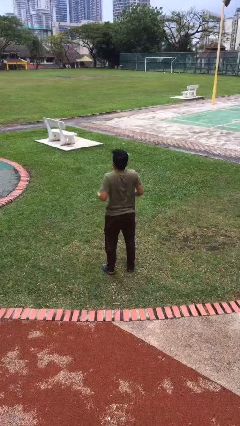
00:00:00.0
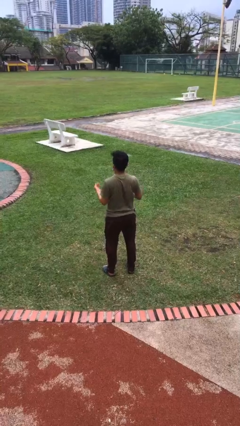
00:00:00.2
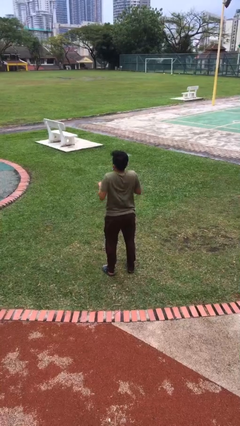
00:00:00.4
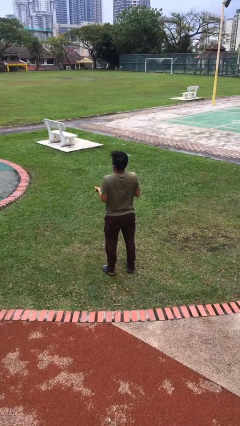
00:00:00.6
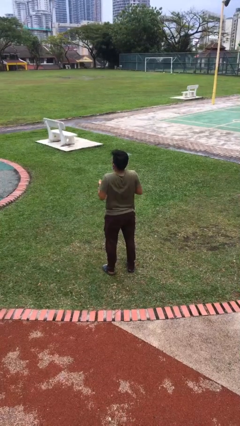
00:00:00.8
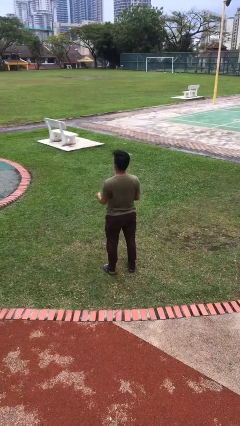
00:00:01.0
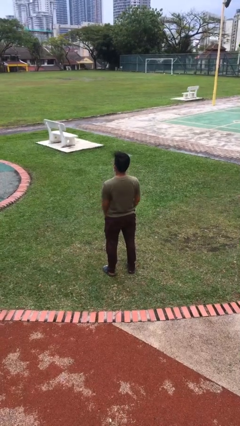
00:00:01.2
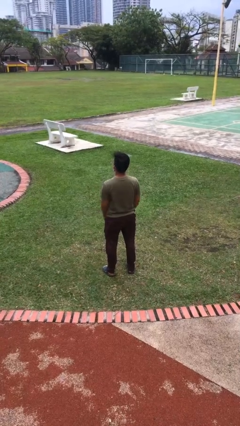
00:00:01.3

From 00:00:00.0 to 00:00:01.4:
person shrugs

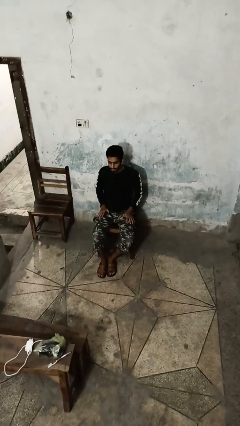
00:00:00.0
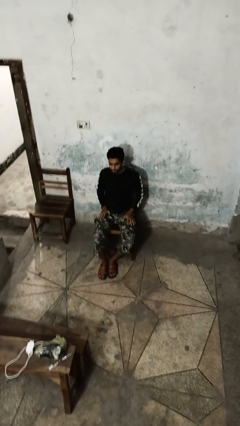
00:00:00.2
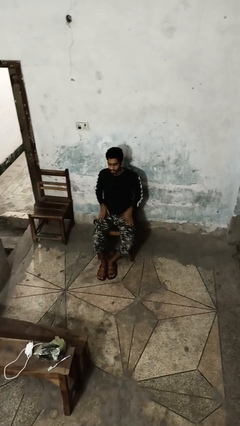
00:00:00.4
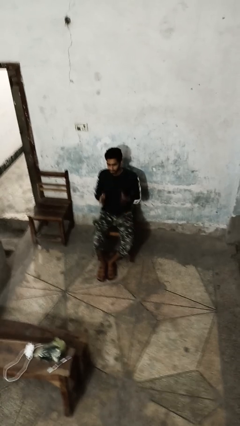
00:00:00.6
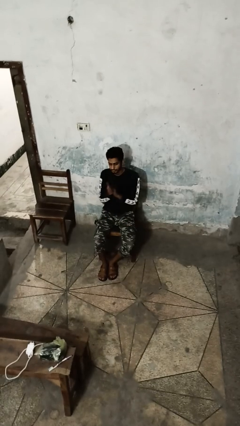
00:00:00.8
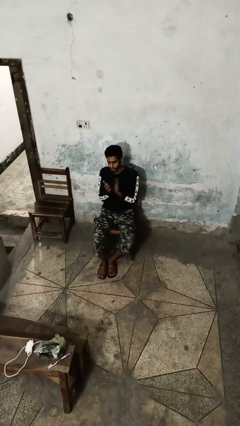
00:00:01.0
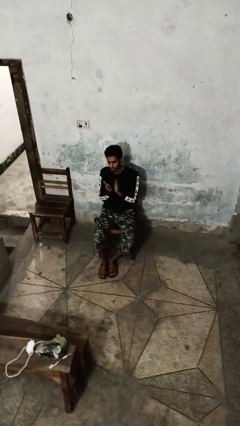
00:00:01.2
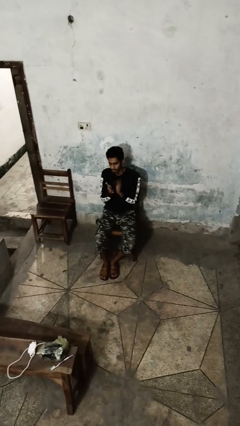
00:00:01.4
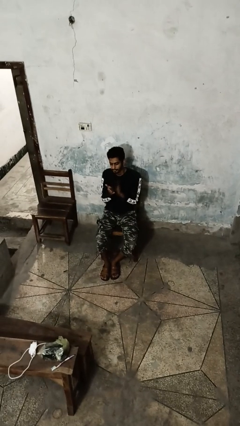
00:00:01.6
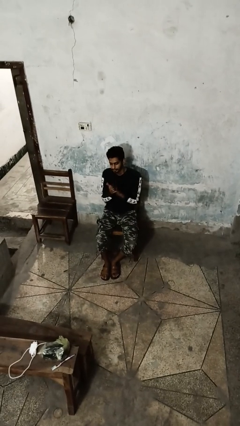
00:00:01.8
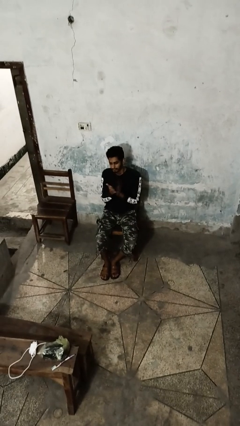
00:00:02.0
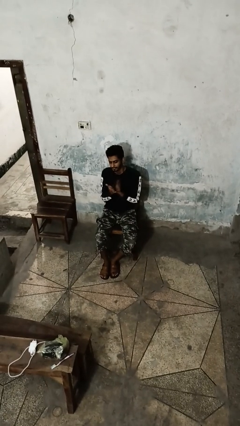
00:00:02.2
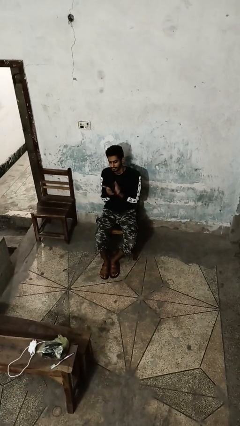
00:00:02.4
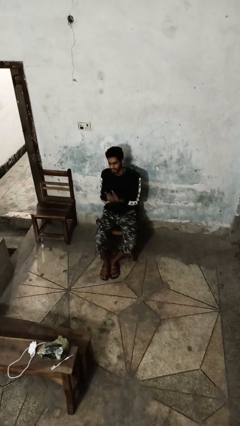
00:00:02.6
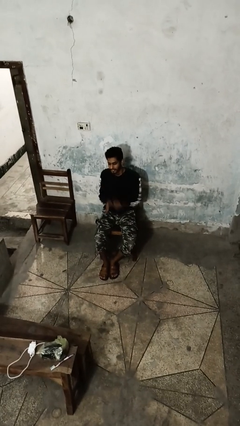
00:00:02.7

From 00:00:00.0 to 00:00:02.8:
person claps hands

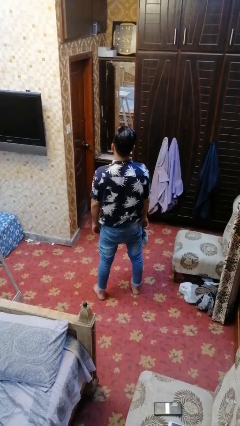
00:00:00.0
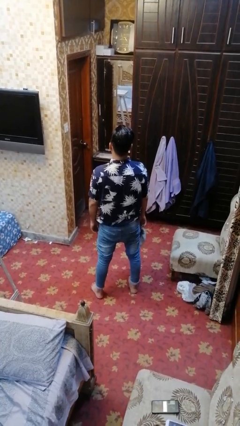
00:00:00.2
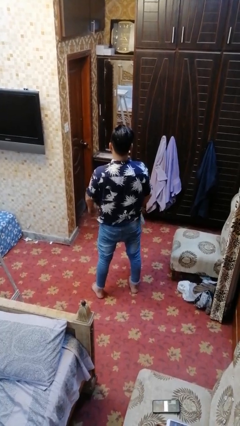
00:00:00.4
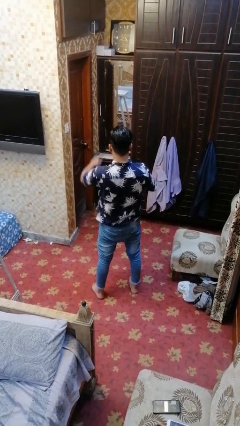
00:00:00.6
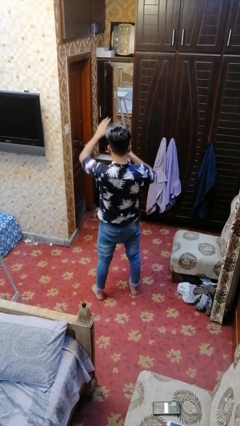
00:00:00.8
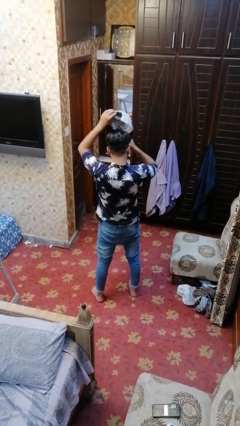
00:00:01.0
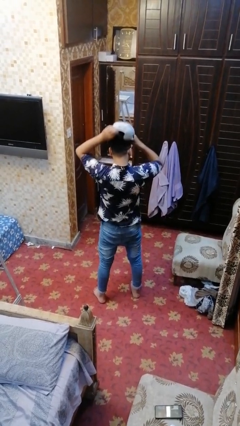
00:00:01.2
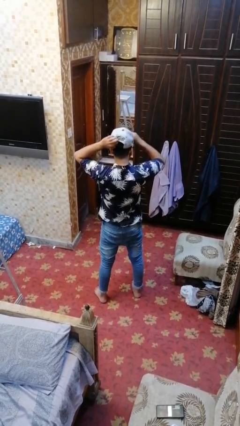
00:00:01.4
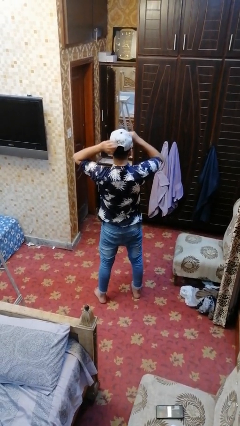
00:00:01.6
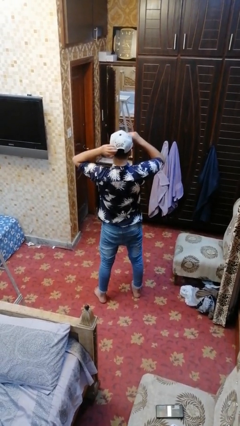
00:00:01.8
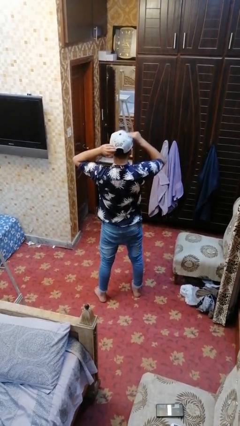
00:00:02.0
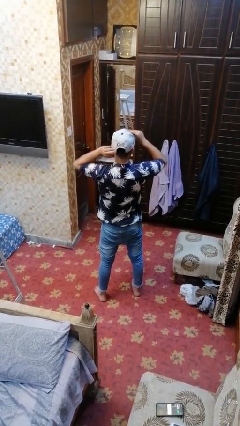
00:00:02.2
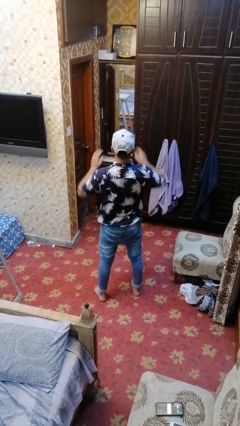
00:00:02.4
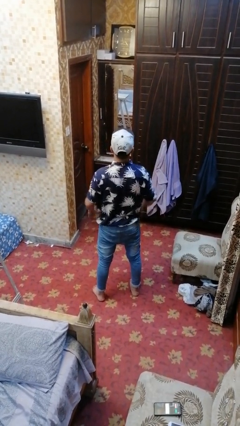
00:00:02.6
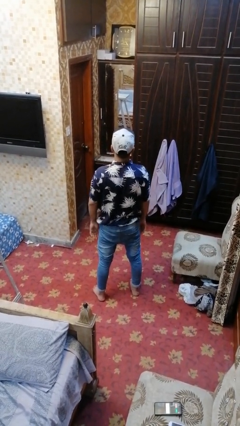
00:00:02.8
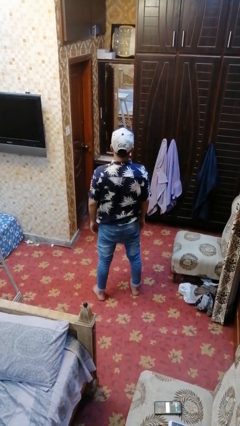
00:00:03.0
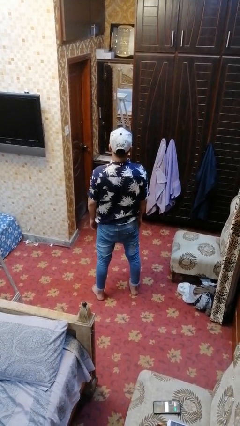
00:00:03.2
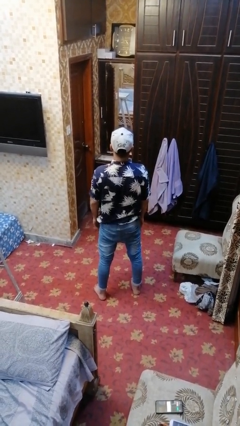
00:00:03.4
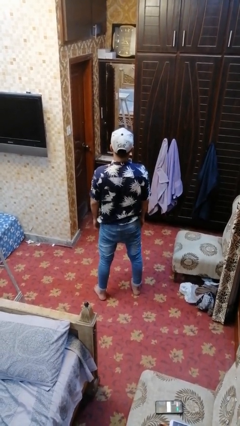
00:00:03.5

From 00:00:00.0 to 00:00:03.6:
person puts on hat

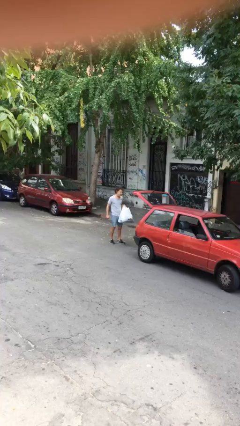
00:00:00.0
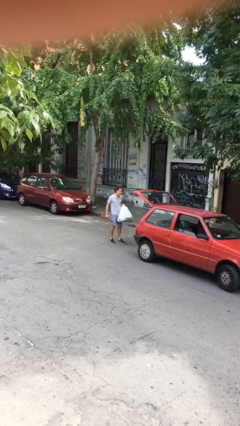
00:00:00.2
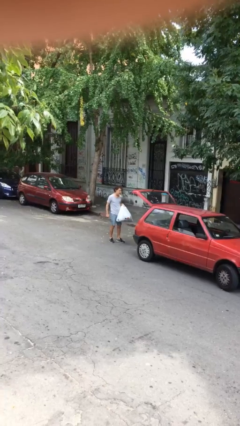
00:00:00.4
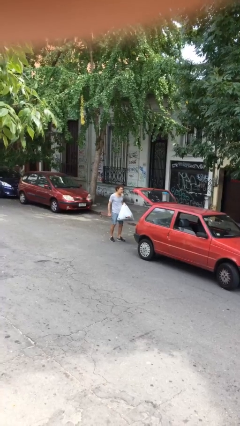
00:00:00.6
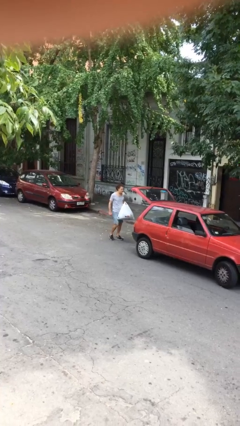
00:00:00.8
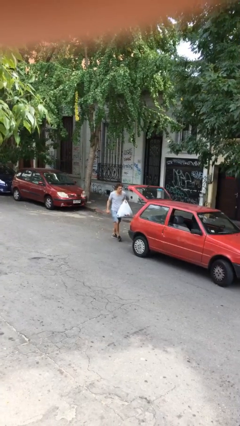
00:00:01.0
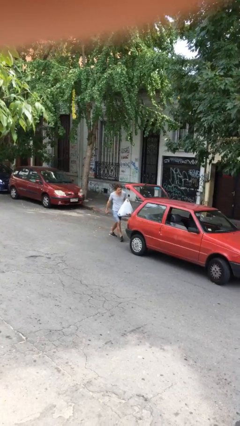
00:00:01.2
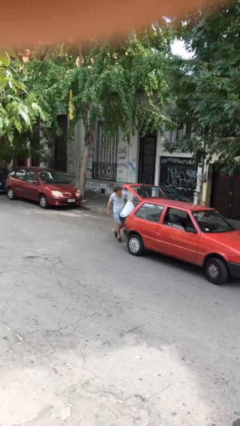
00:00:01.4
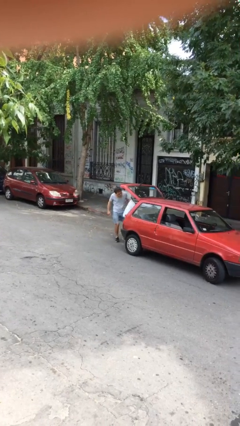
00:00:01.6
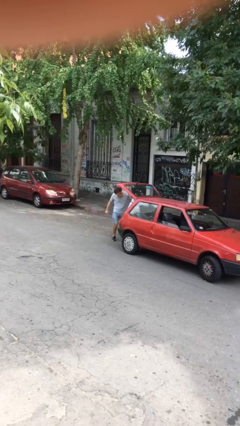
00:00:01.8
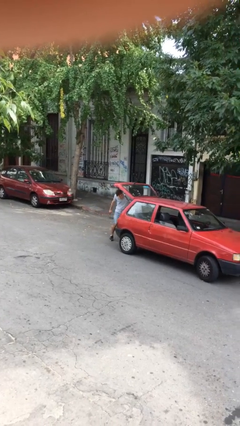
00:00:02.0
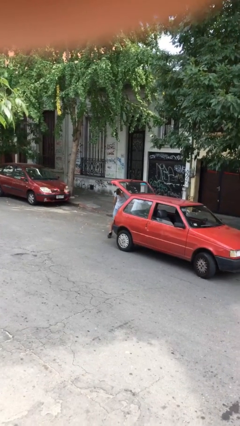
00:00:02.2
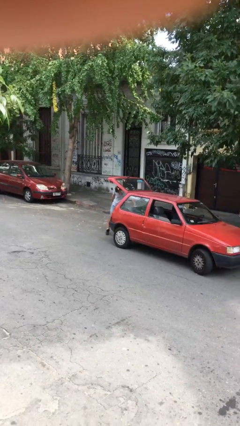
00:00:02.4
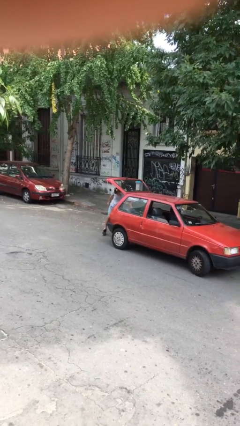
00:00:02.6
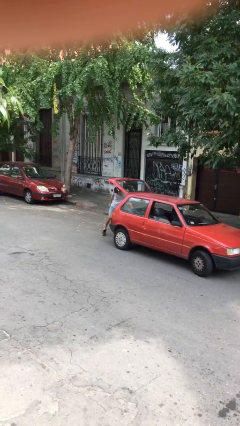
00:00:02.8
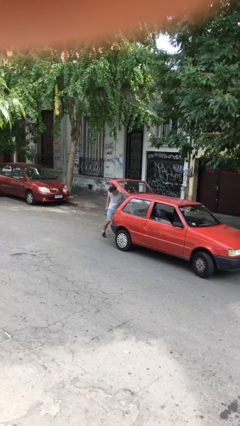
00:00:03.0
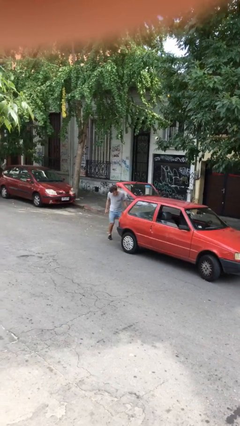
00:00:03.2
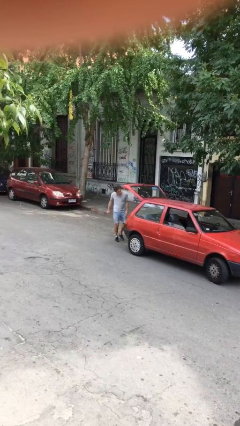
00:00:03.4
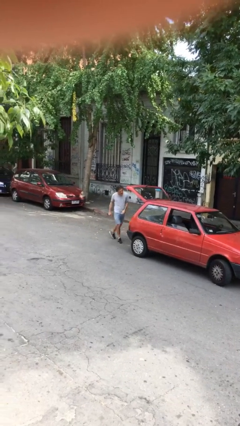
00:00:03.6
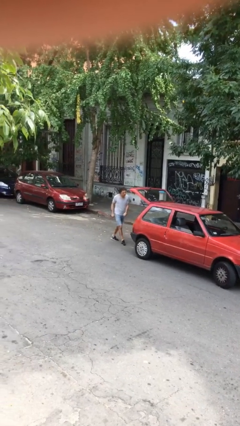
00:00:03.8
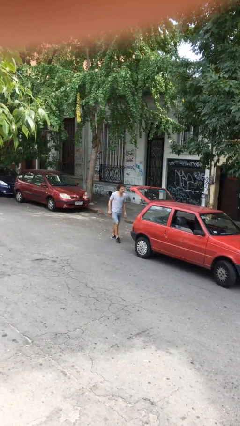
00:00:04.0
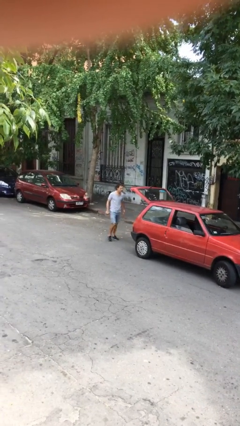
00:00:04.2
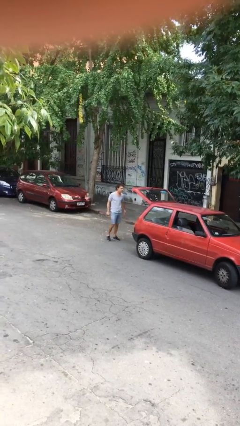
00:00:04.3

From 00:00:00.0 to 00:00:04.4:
person loads car

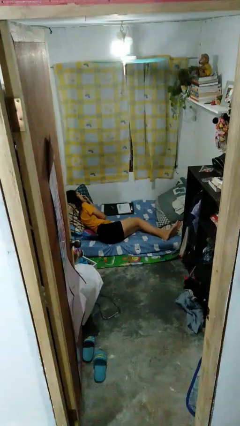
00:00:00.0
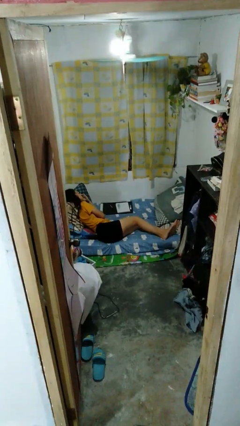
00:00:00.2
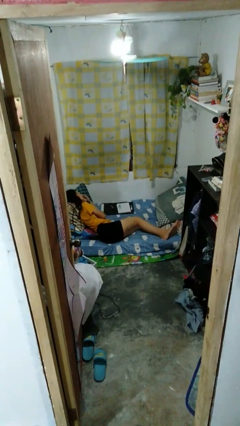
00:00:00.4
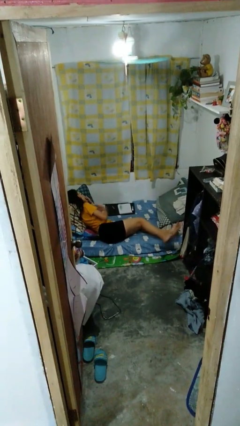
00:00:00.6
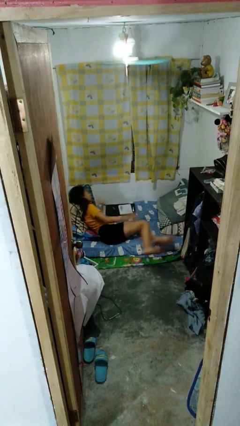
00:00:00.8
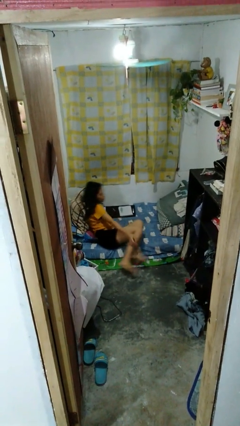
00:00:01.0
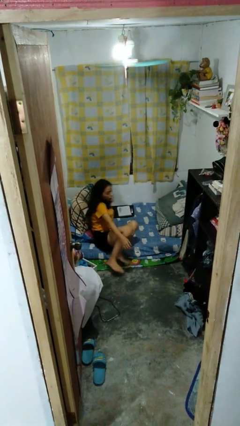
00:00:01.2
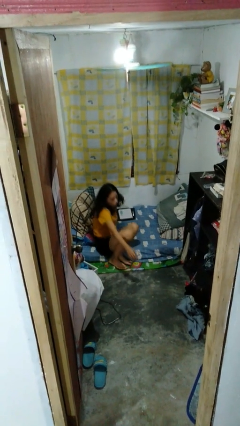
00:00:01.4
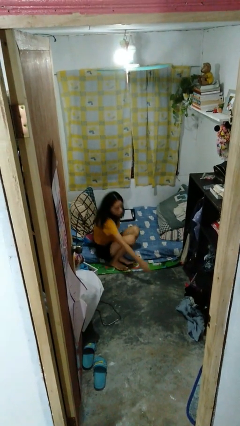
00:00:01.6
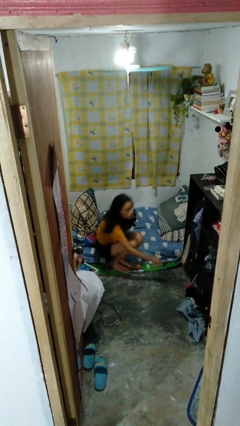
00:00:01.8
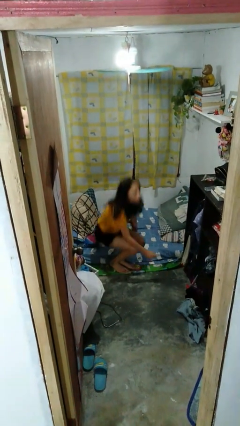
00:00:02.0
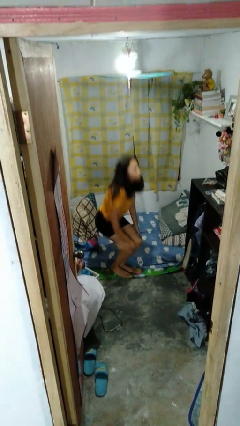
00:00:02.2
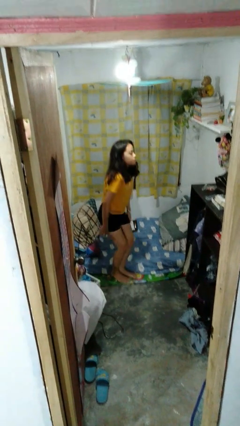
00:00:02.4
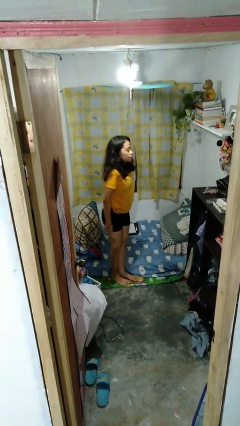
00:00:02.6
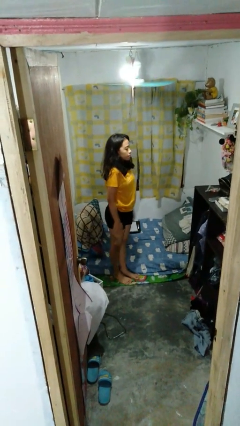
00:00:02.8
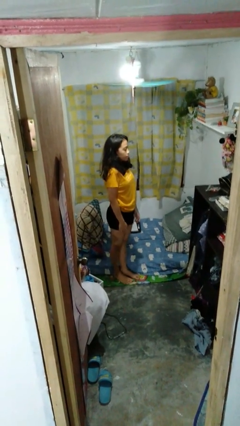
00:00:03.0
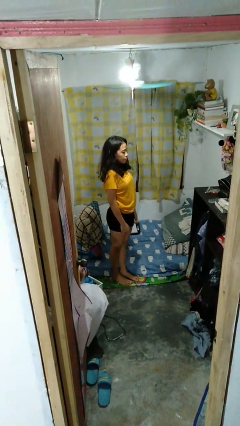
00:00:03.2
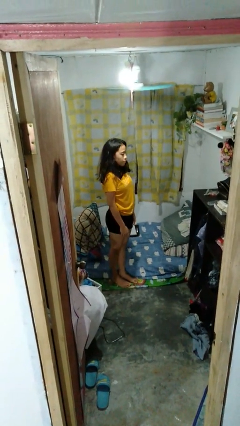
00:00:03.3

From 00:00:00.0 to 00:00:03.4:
person stands up

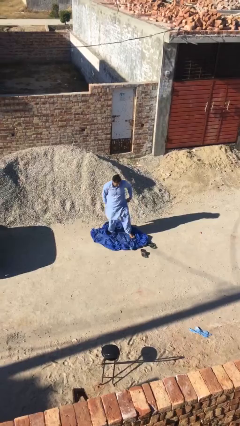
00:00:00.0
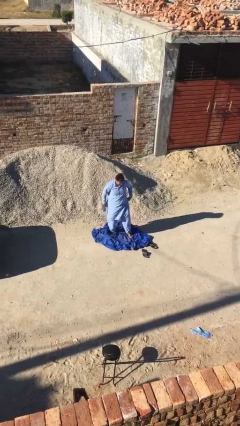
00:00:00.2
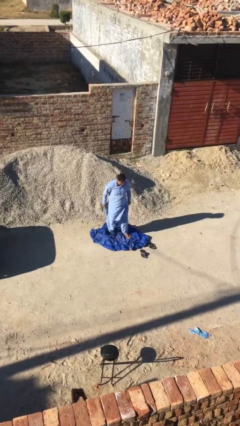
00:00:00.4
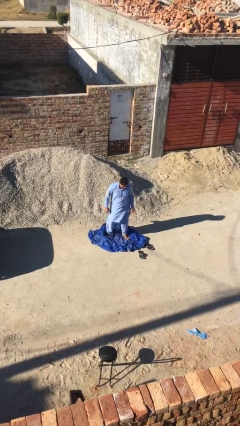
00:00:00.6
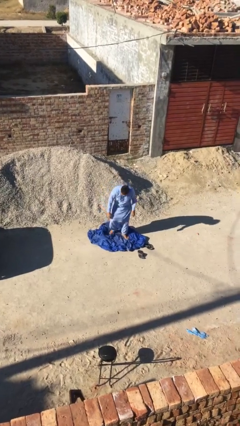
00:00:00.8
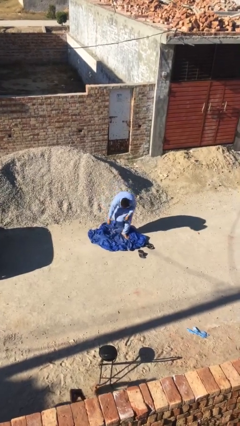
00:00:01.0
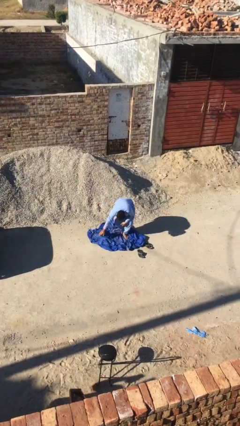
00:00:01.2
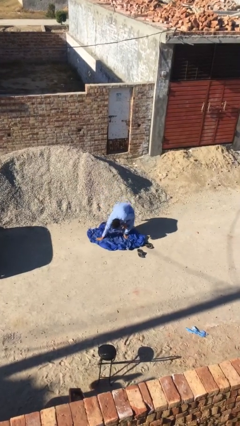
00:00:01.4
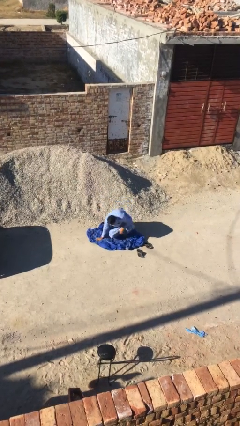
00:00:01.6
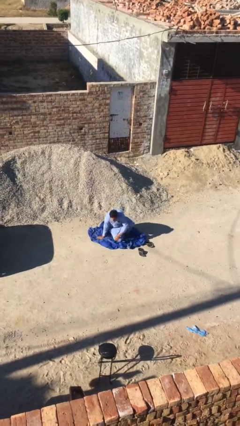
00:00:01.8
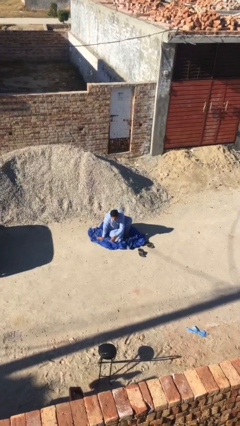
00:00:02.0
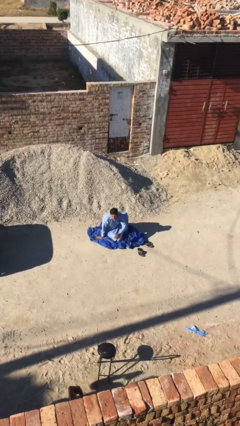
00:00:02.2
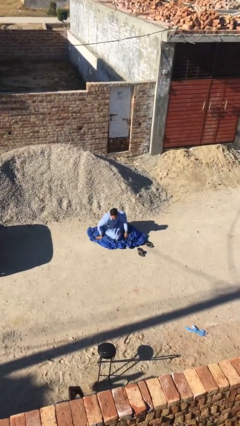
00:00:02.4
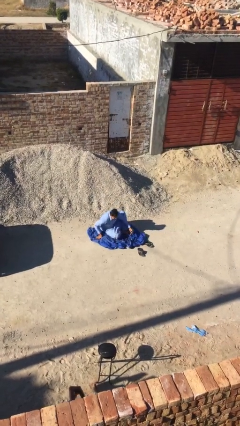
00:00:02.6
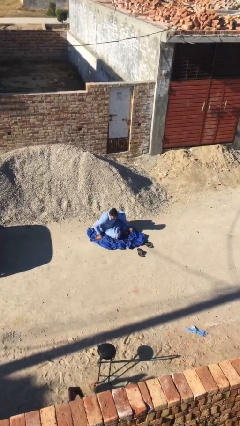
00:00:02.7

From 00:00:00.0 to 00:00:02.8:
person sits down
